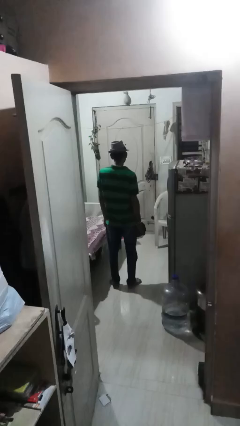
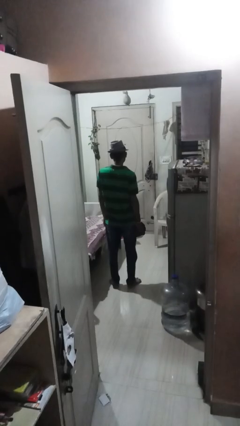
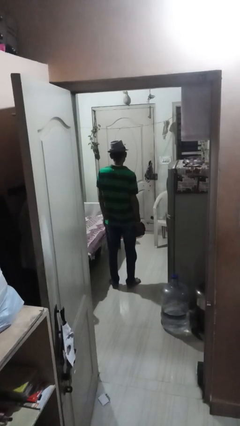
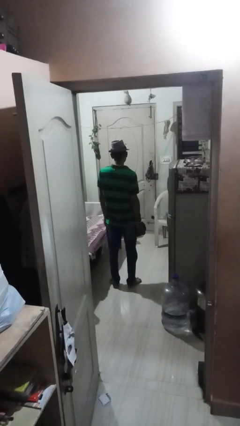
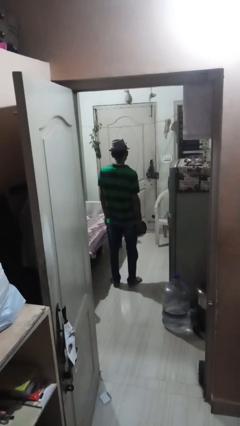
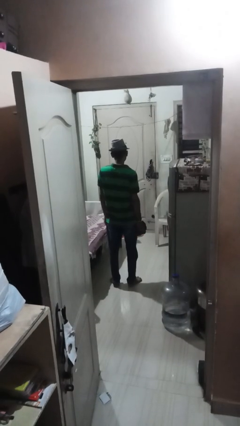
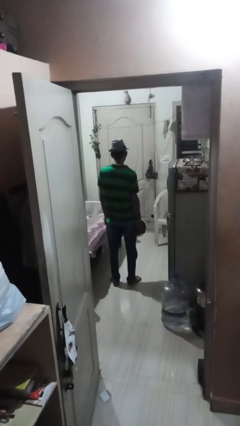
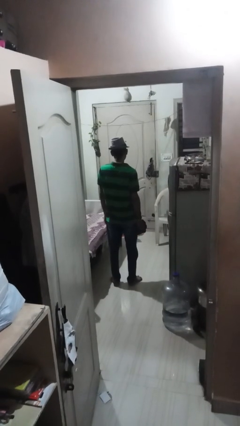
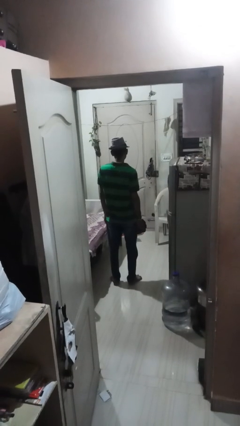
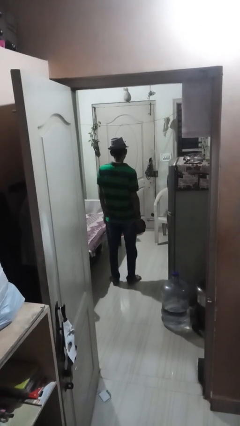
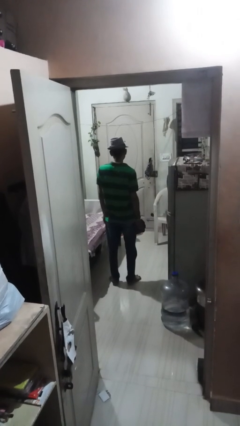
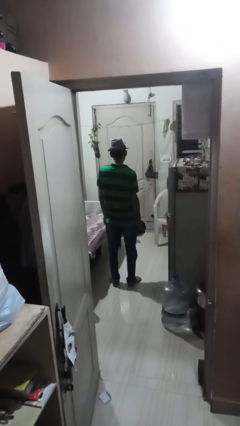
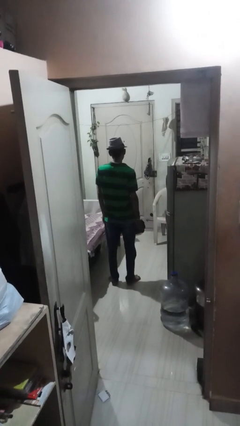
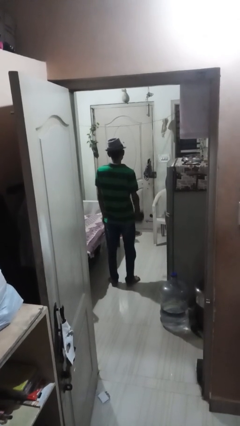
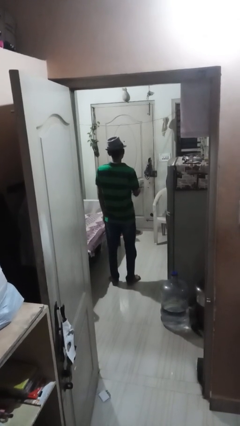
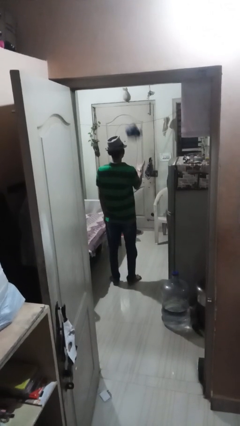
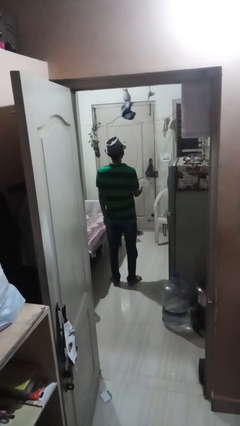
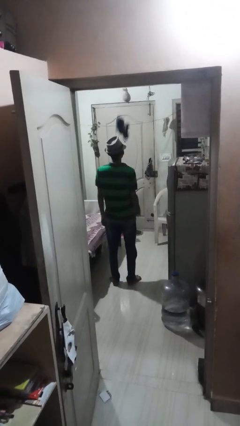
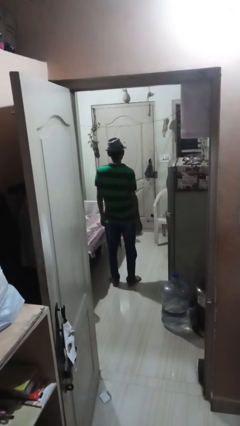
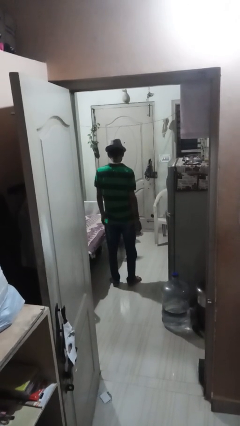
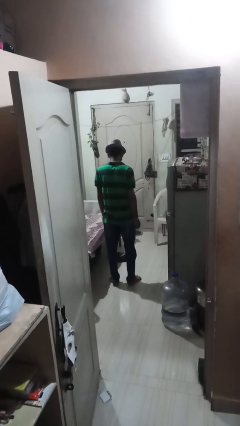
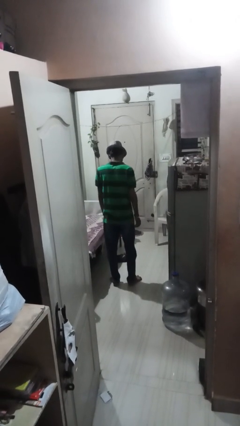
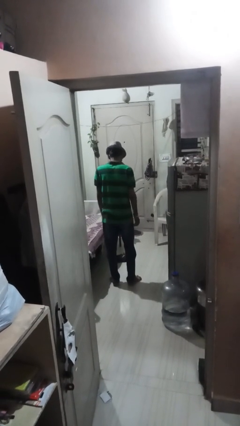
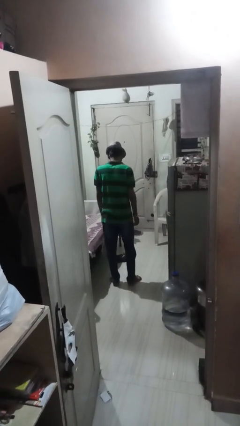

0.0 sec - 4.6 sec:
person throws object into air

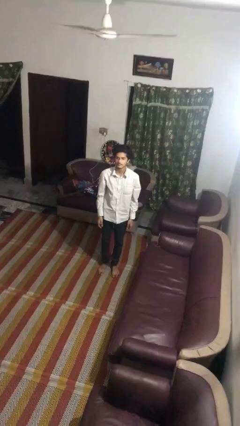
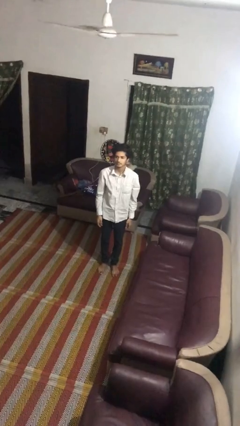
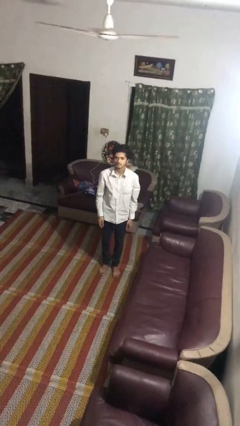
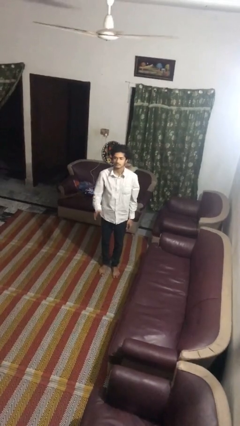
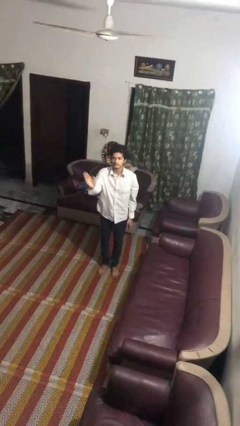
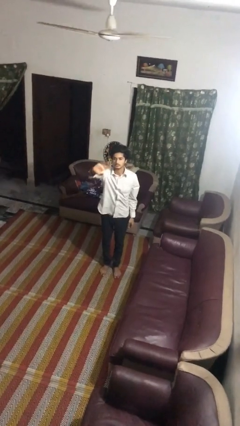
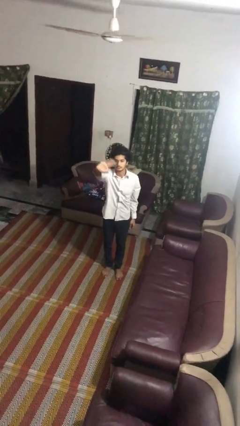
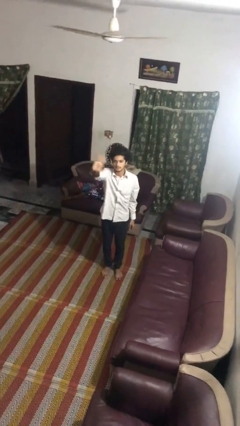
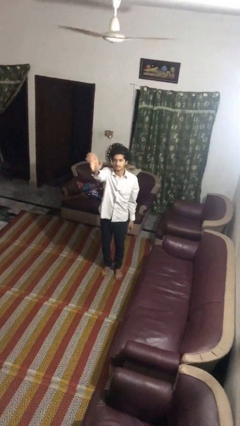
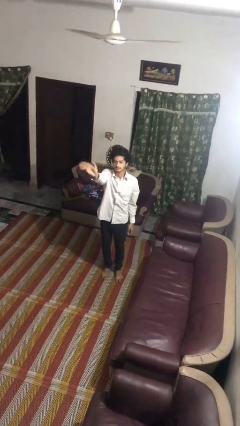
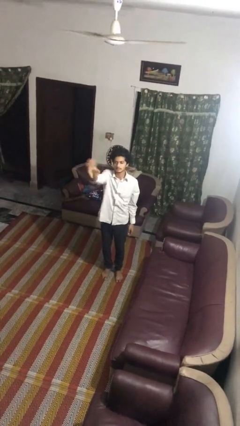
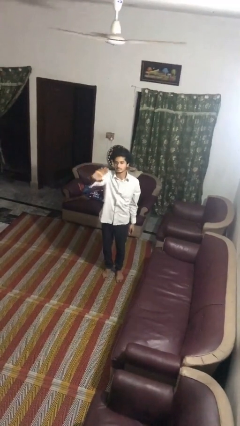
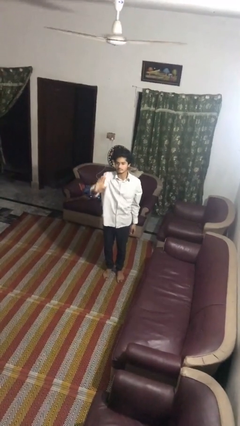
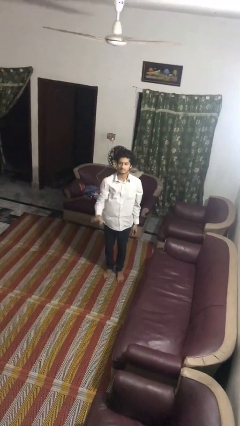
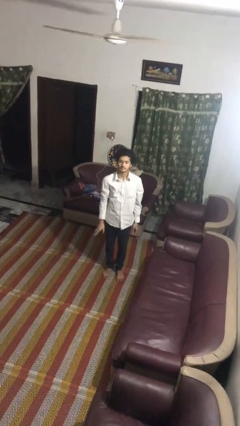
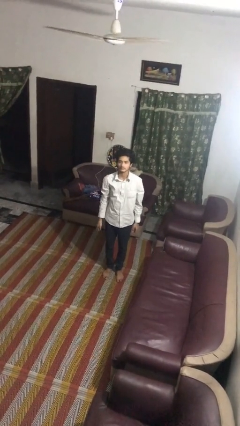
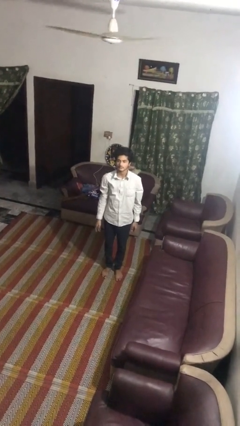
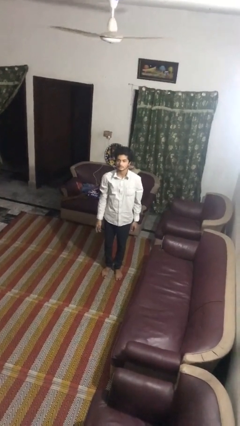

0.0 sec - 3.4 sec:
person waves at person

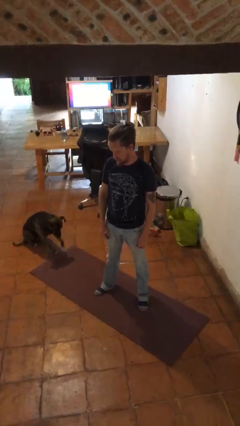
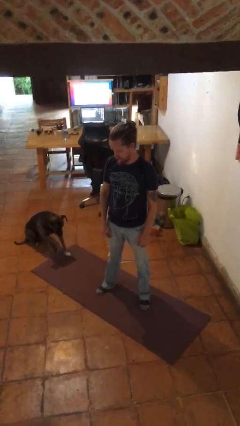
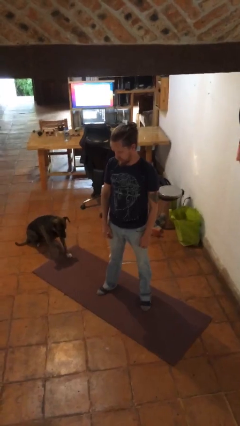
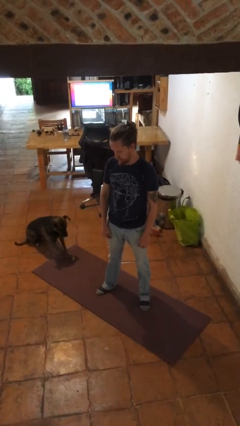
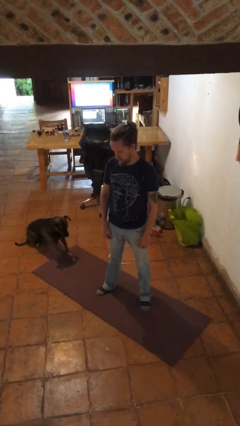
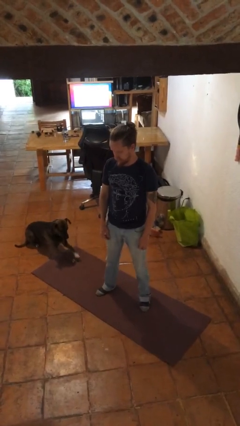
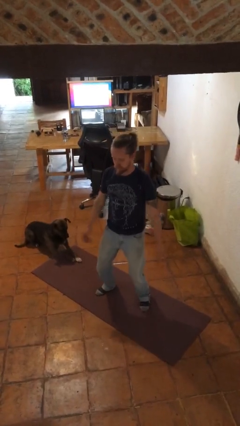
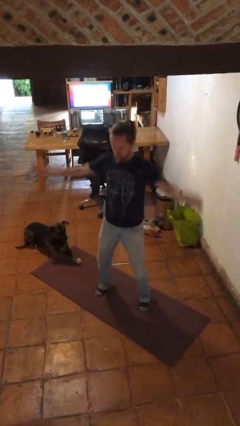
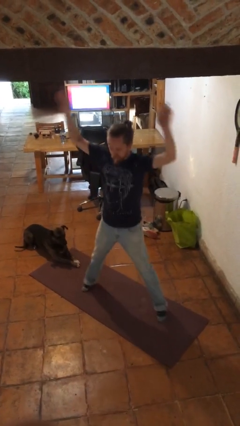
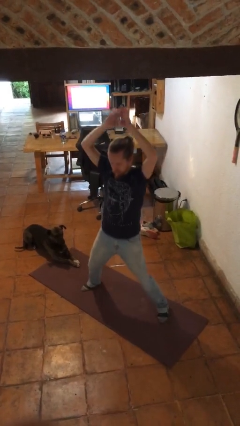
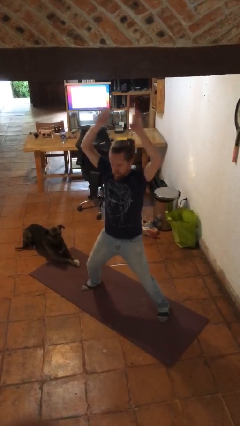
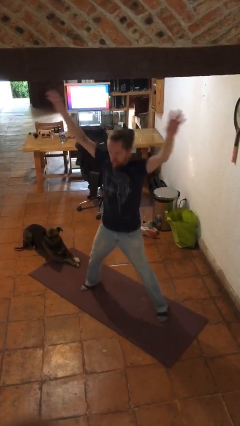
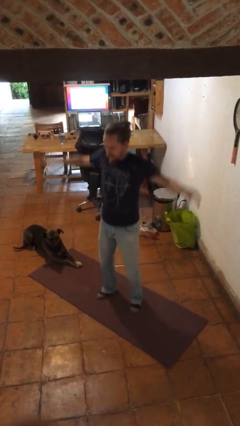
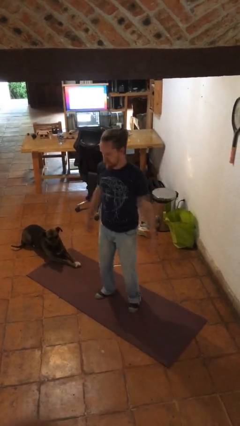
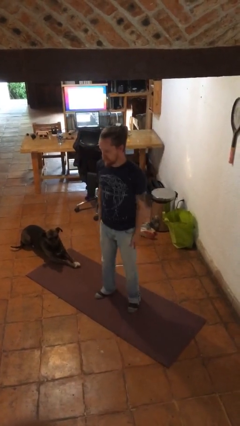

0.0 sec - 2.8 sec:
person exercises with jumping jacks

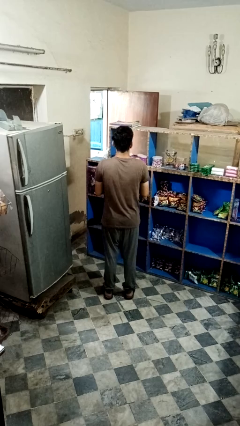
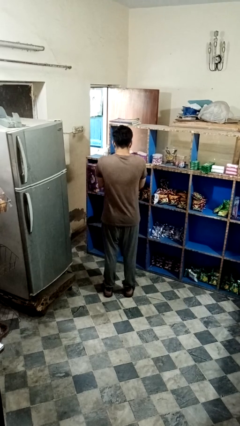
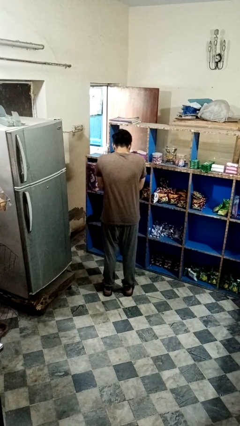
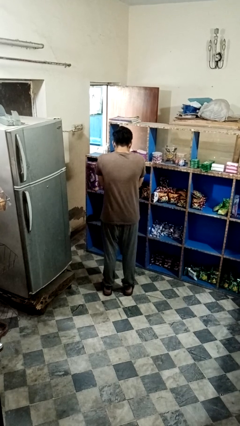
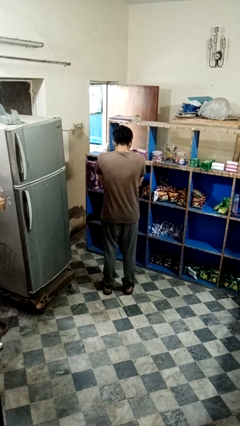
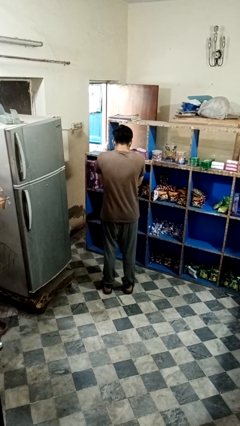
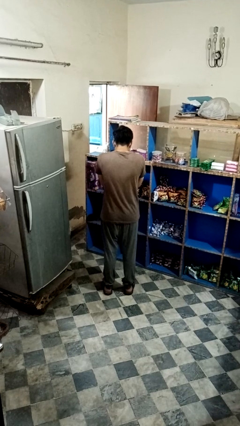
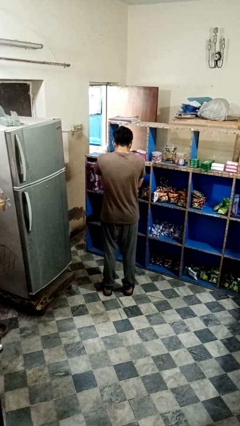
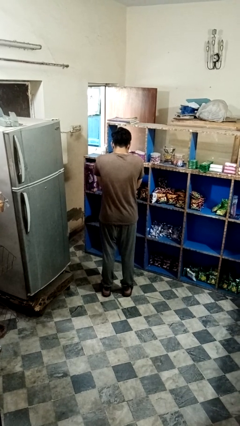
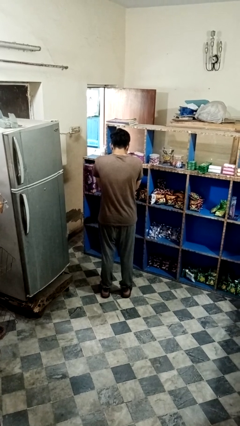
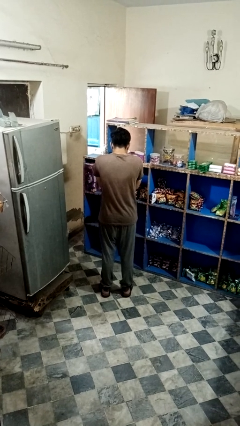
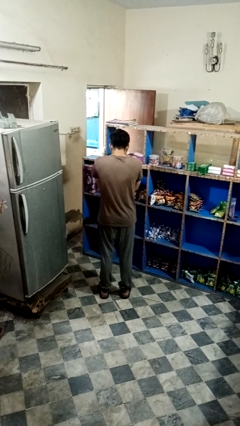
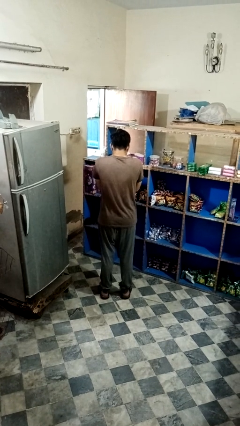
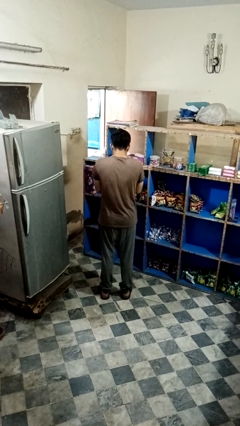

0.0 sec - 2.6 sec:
person sneezes into hand

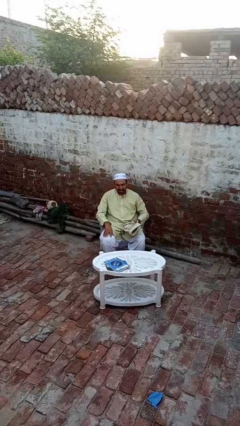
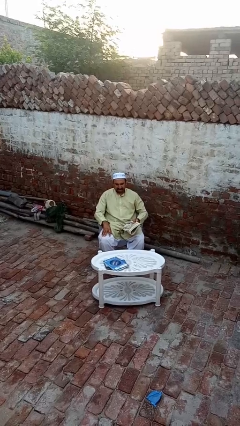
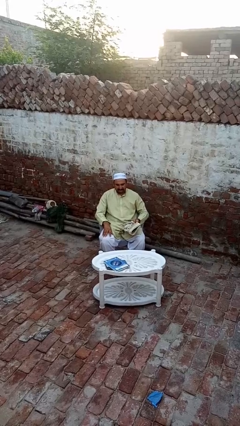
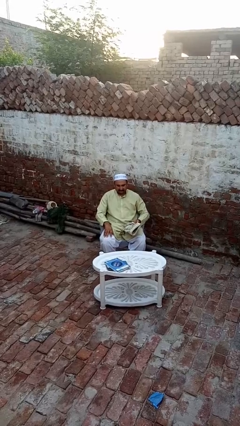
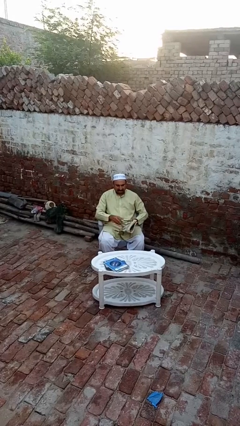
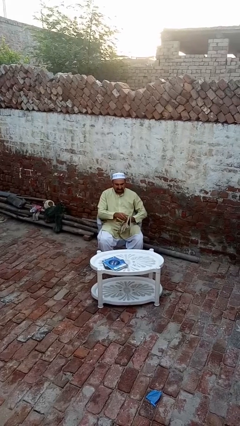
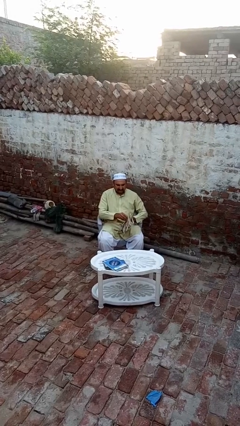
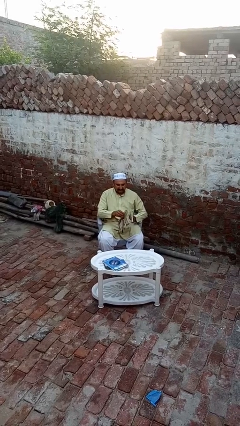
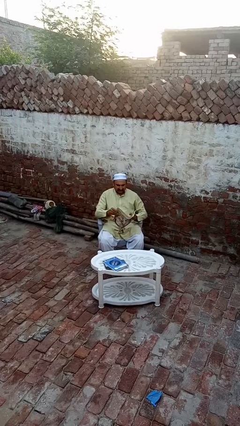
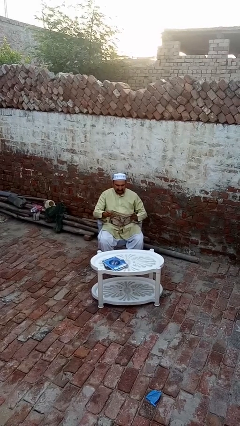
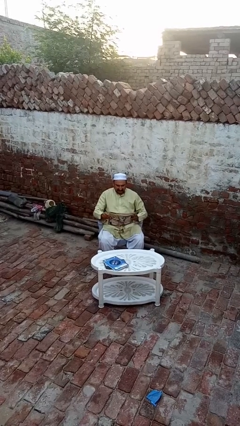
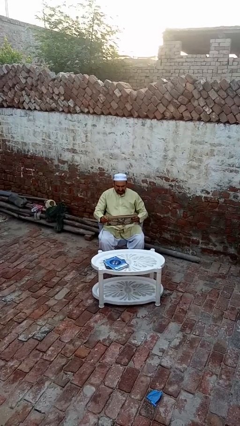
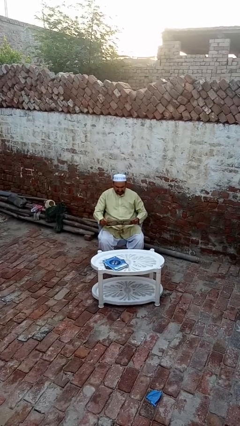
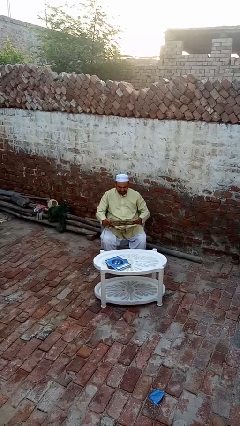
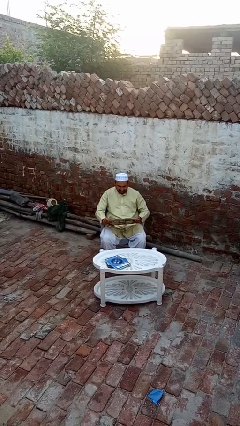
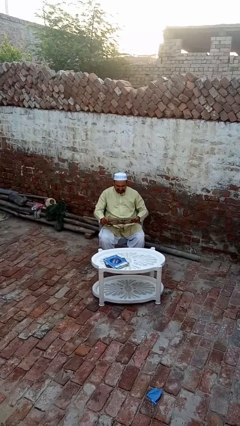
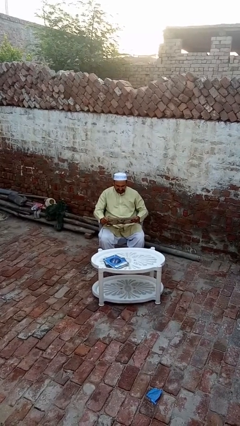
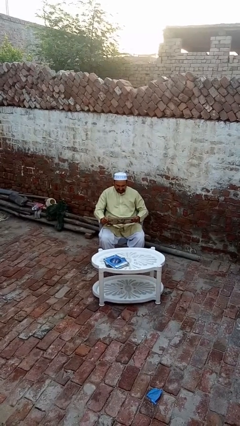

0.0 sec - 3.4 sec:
person reads magazine

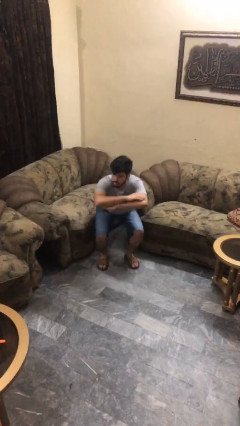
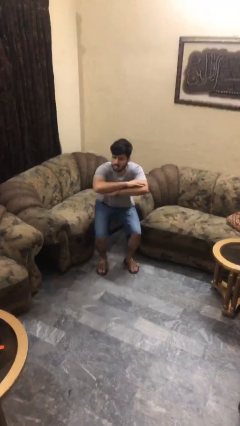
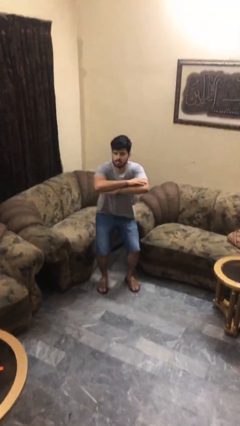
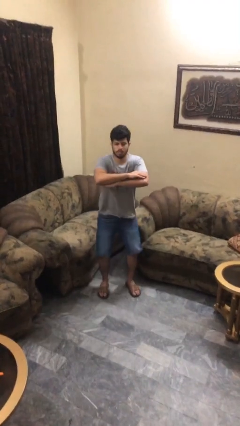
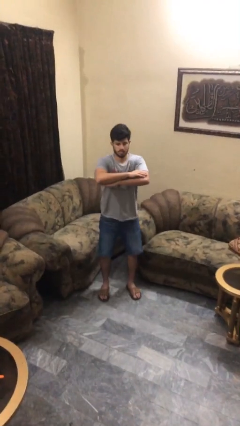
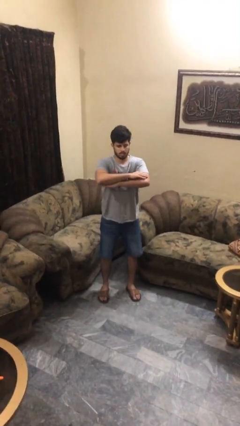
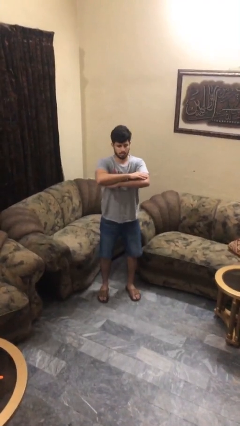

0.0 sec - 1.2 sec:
person stands up
